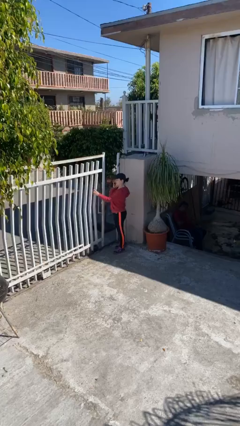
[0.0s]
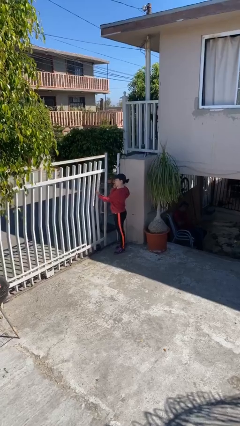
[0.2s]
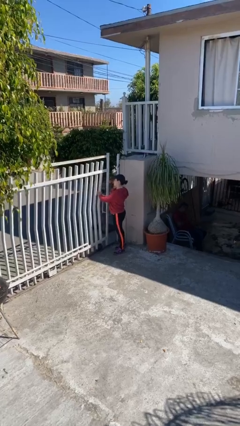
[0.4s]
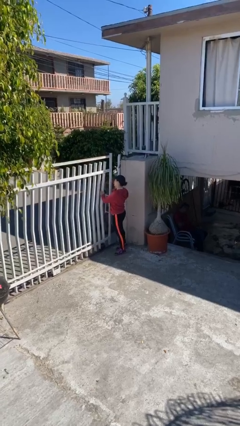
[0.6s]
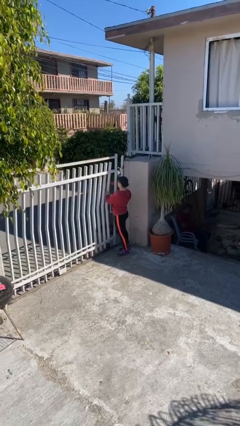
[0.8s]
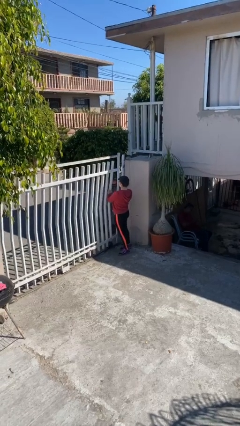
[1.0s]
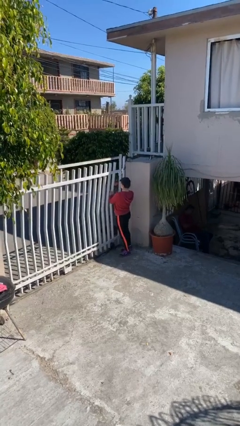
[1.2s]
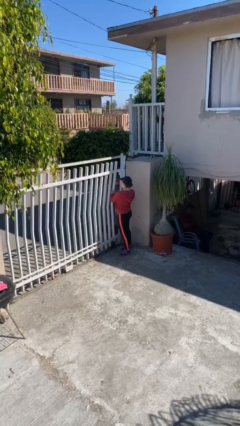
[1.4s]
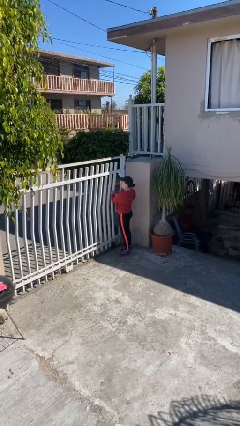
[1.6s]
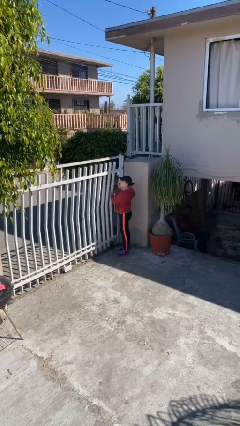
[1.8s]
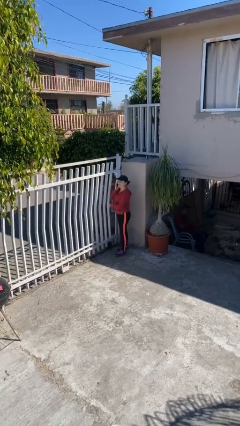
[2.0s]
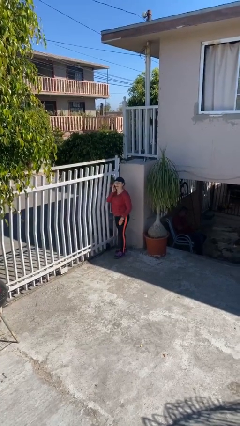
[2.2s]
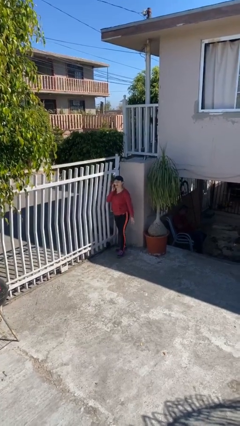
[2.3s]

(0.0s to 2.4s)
person closes facility door

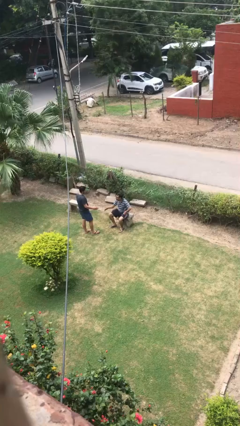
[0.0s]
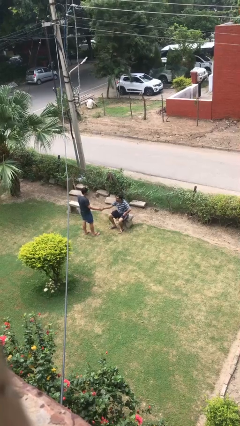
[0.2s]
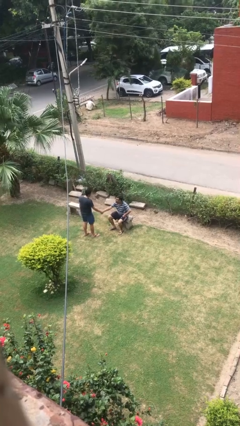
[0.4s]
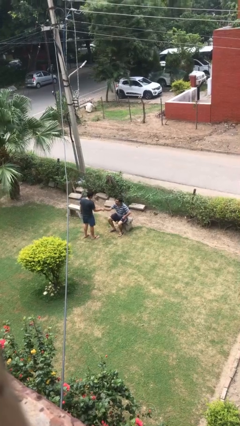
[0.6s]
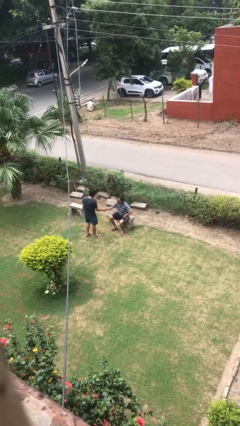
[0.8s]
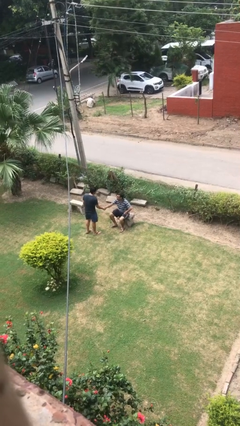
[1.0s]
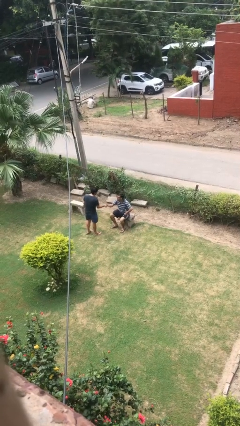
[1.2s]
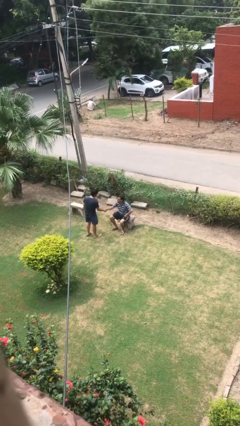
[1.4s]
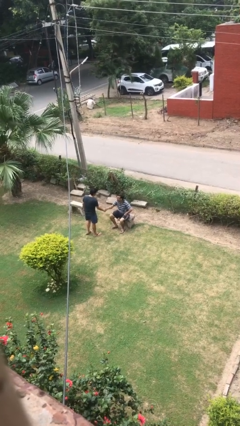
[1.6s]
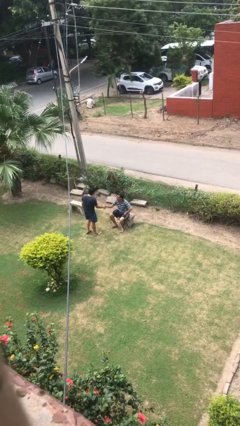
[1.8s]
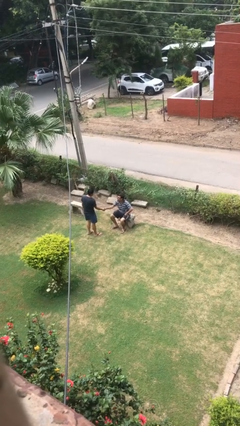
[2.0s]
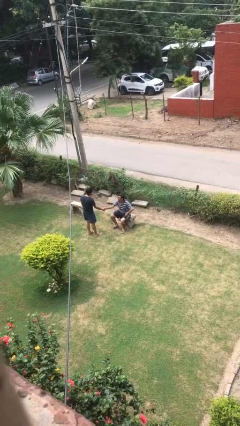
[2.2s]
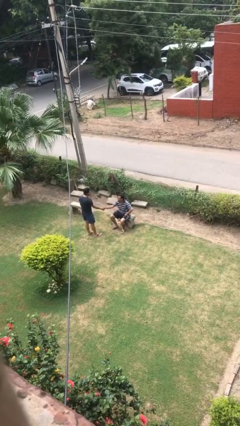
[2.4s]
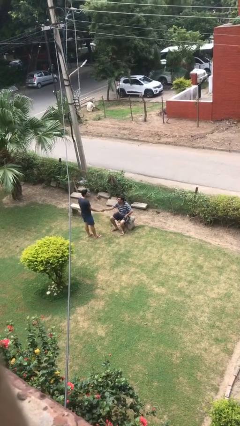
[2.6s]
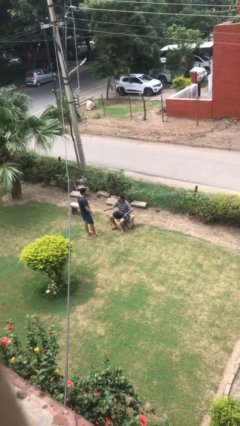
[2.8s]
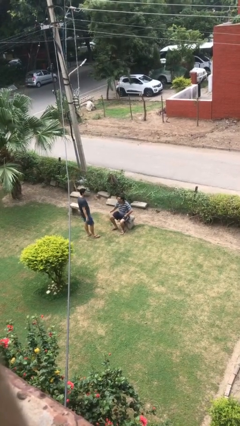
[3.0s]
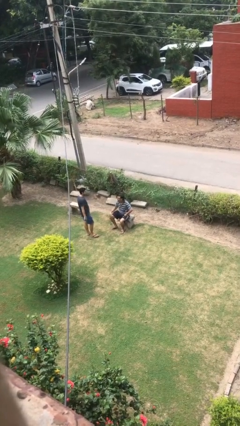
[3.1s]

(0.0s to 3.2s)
person shakes hand

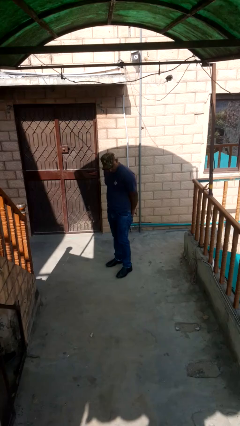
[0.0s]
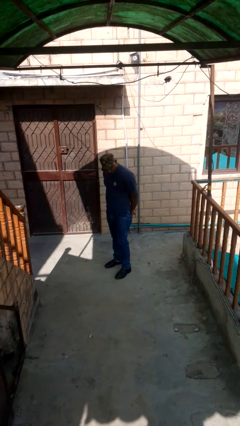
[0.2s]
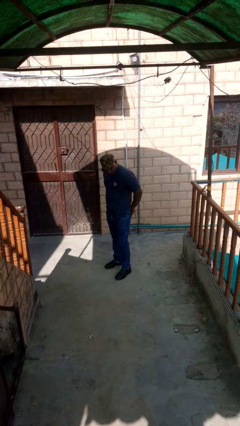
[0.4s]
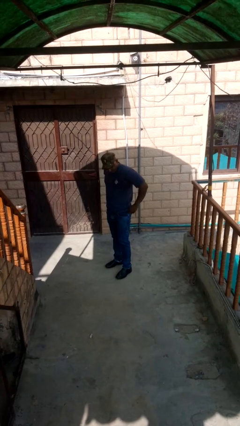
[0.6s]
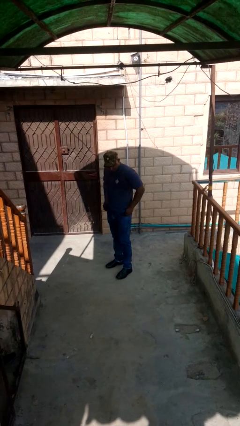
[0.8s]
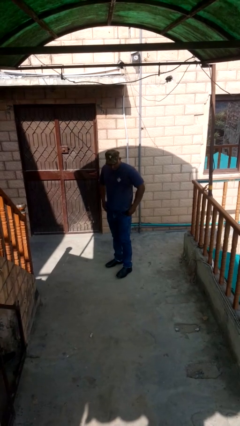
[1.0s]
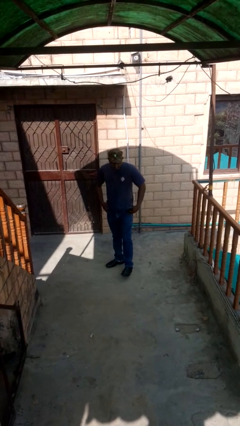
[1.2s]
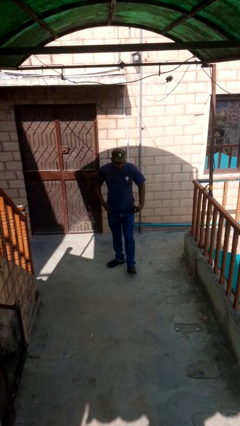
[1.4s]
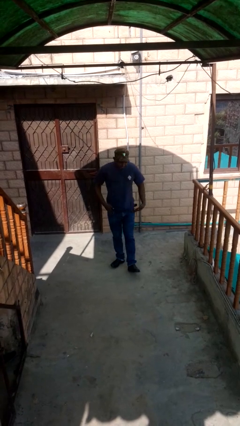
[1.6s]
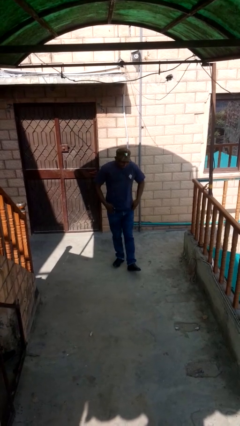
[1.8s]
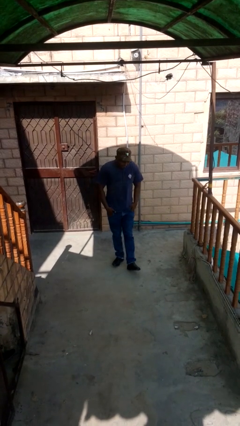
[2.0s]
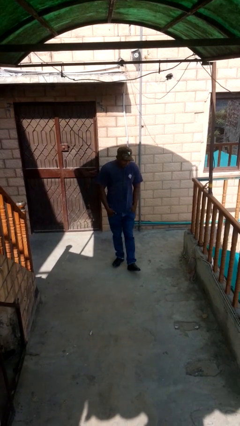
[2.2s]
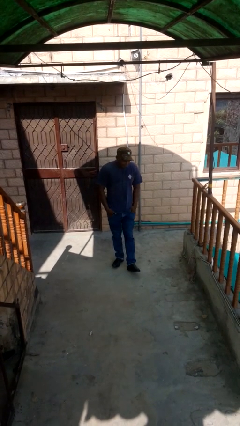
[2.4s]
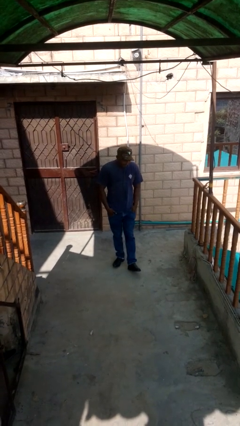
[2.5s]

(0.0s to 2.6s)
person puts hands in back pockets

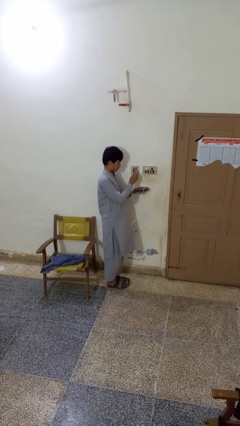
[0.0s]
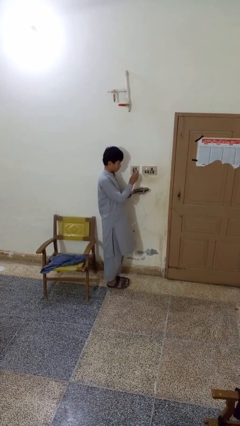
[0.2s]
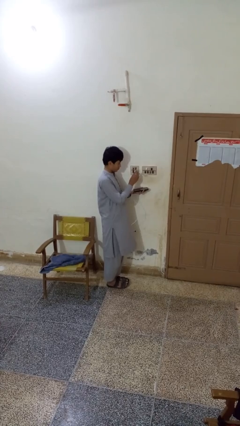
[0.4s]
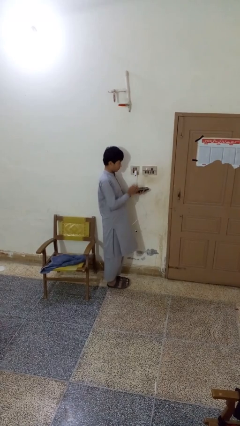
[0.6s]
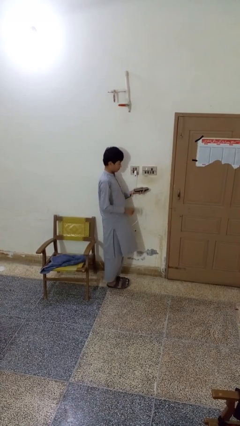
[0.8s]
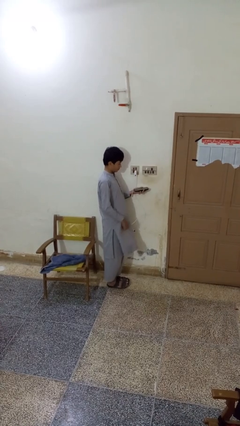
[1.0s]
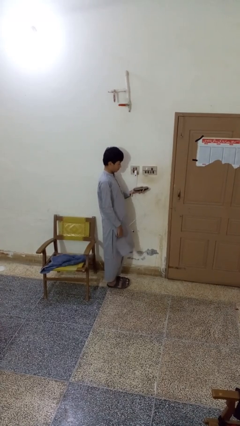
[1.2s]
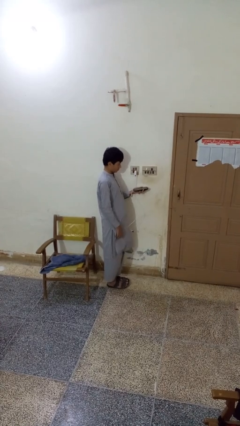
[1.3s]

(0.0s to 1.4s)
person plugs into electrical socket

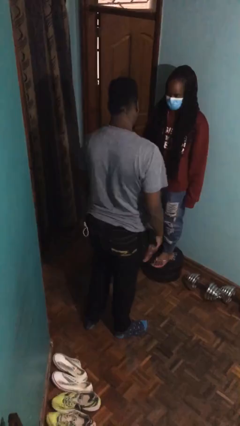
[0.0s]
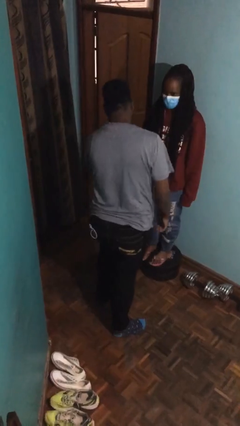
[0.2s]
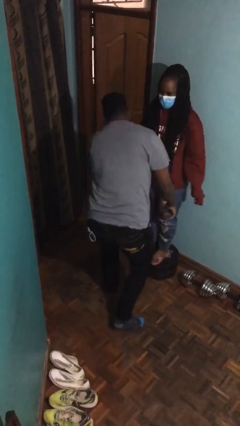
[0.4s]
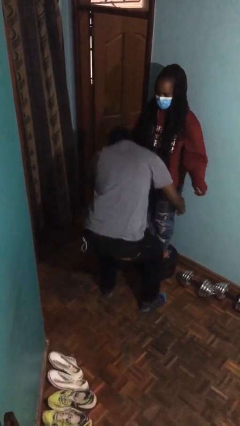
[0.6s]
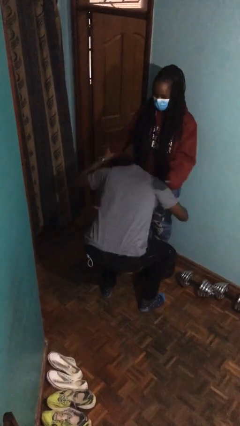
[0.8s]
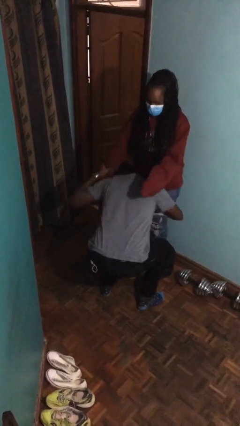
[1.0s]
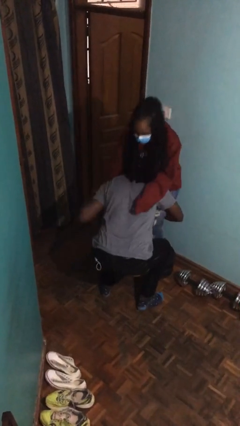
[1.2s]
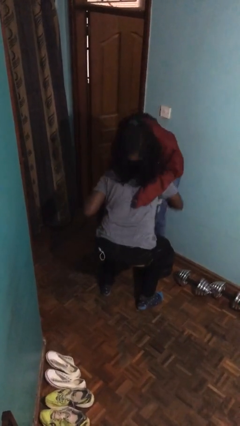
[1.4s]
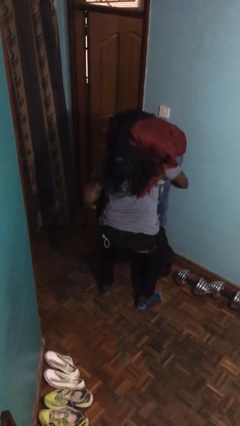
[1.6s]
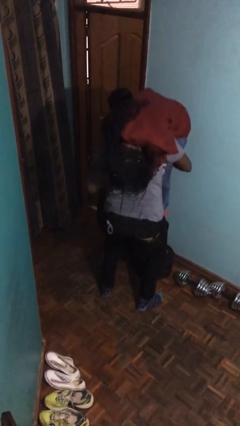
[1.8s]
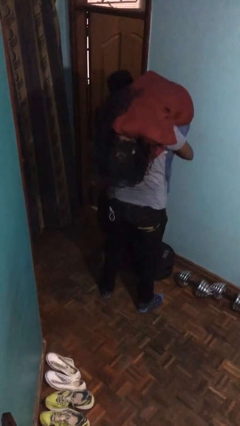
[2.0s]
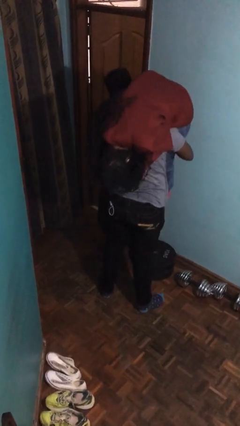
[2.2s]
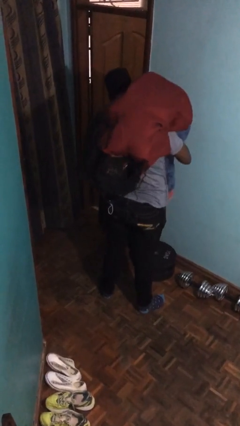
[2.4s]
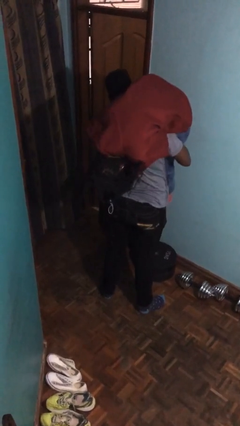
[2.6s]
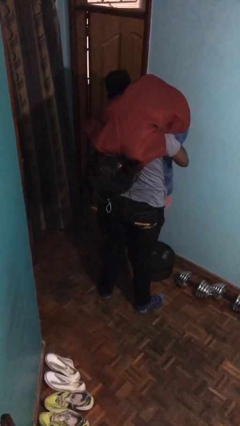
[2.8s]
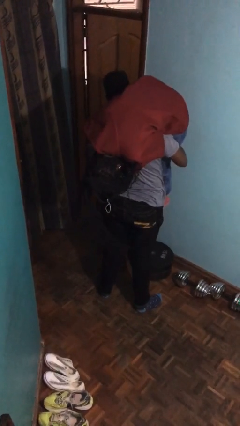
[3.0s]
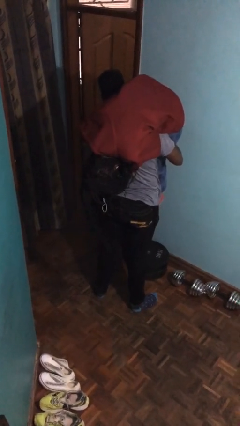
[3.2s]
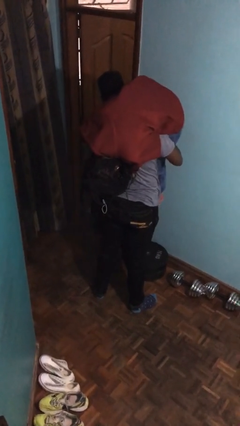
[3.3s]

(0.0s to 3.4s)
person carries person over shoulder

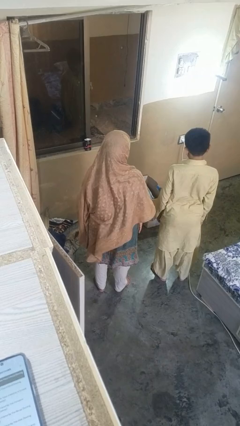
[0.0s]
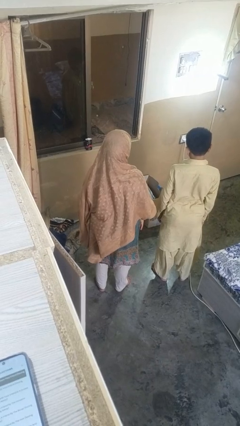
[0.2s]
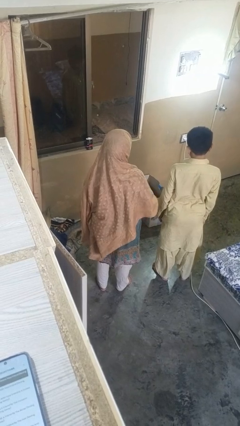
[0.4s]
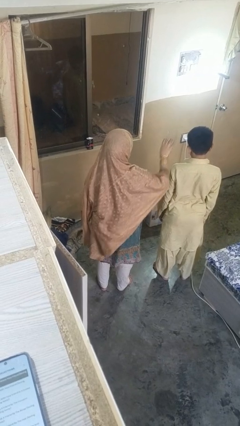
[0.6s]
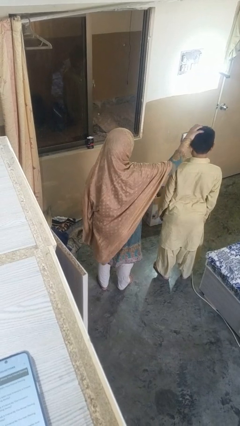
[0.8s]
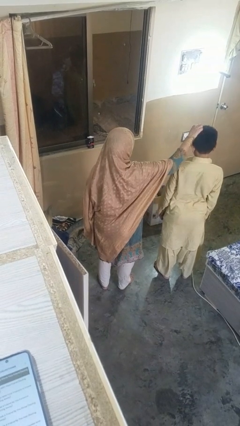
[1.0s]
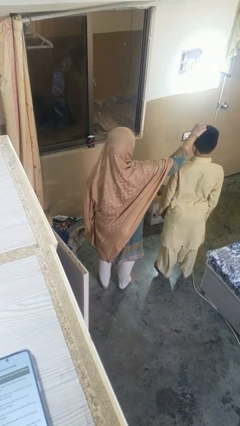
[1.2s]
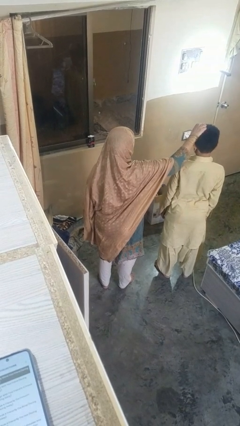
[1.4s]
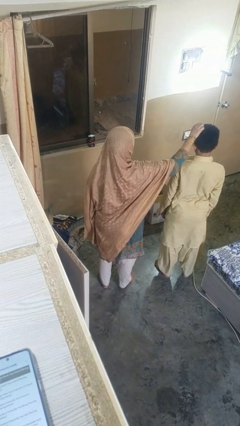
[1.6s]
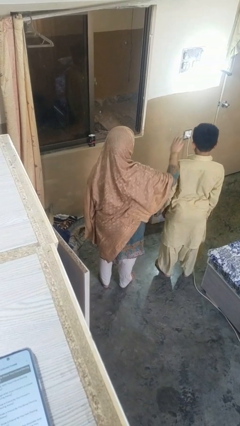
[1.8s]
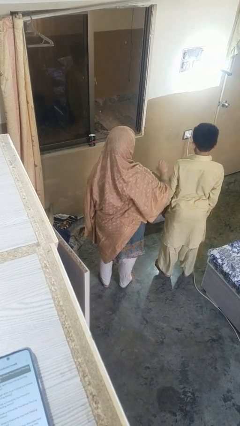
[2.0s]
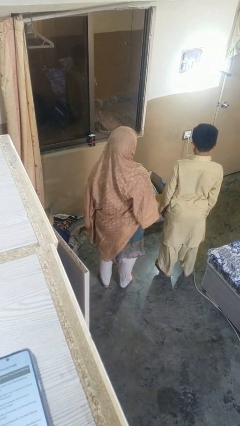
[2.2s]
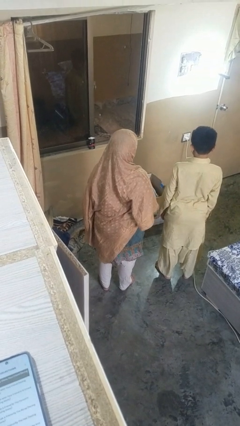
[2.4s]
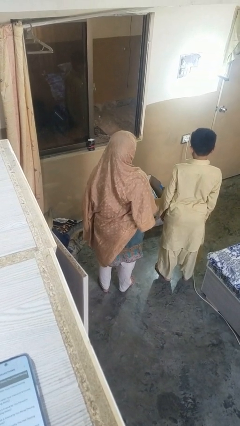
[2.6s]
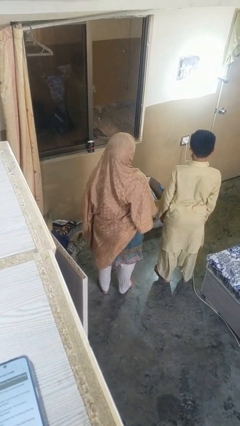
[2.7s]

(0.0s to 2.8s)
person grabs person by hair

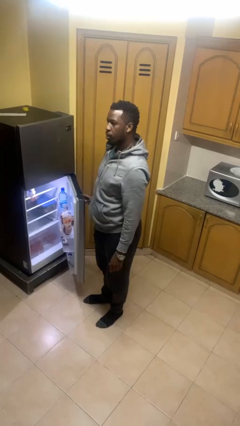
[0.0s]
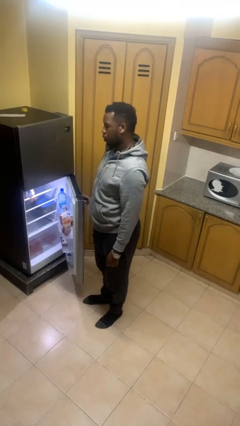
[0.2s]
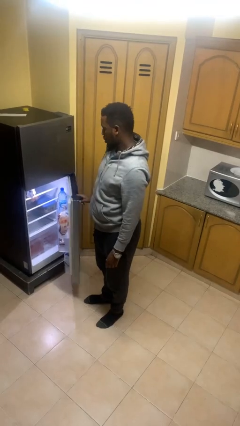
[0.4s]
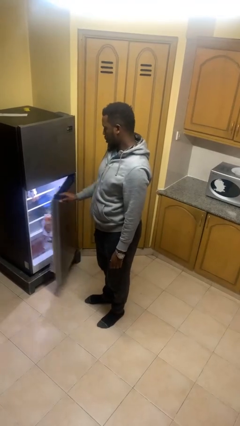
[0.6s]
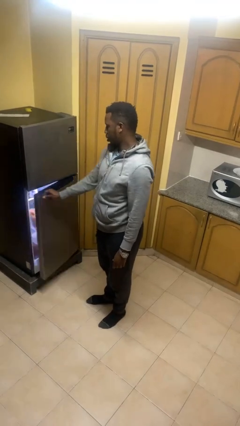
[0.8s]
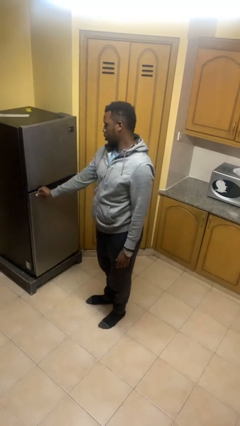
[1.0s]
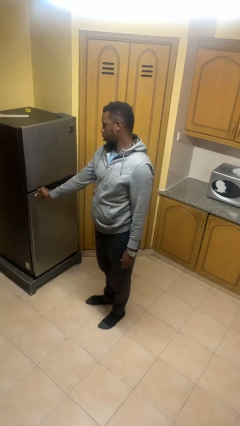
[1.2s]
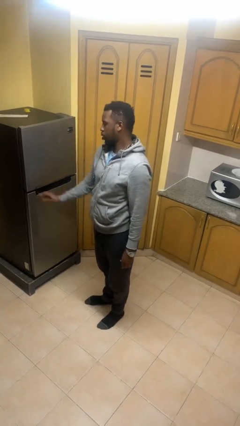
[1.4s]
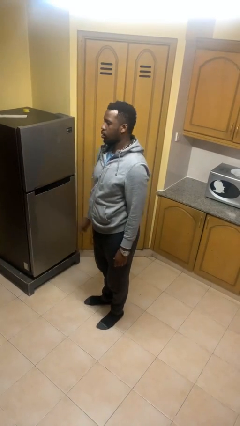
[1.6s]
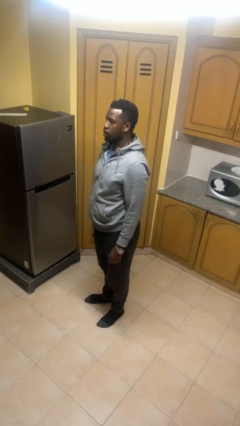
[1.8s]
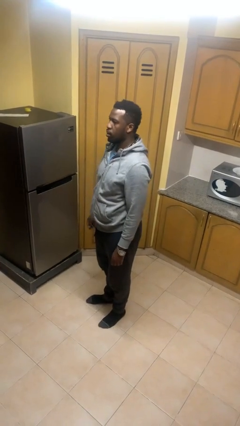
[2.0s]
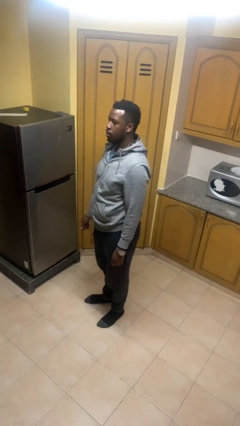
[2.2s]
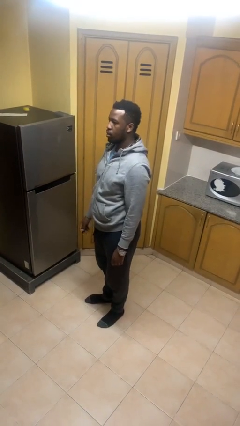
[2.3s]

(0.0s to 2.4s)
person closes refrigerator
